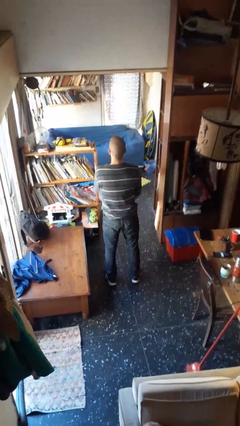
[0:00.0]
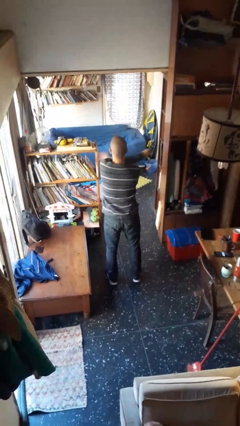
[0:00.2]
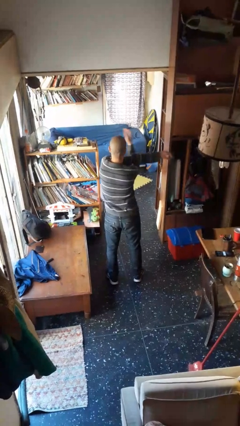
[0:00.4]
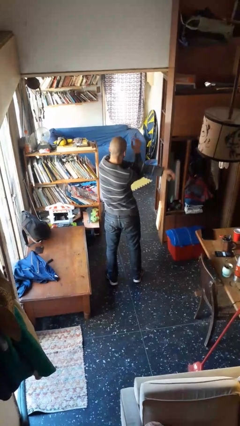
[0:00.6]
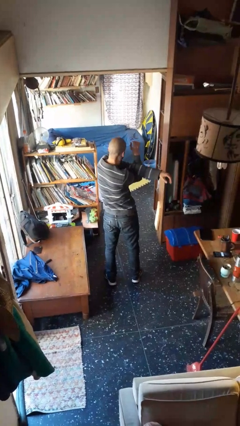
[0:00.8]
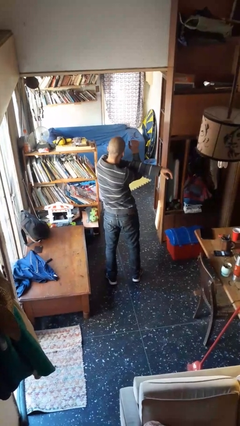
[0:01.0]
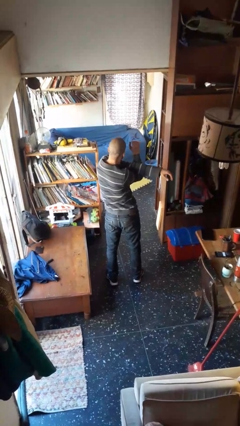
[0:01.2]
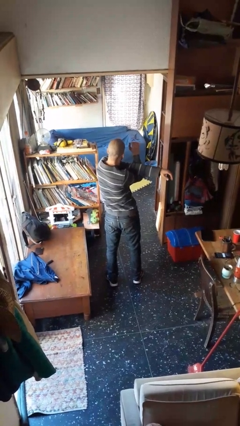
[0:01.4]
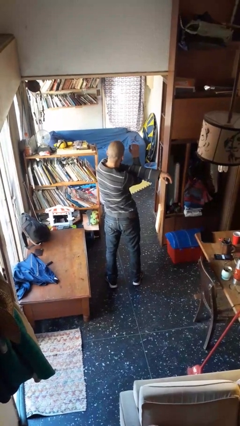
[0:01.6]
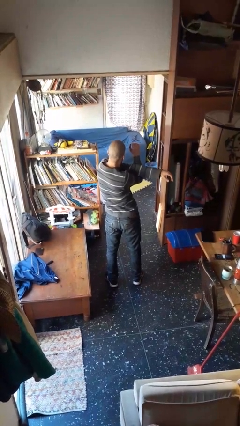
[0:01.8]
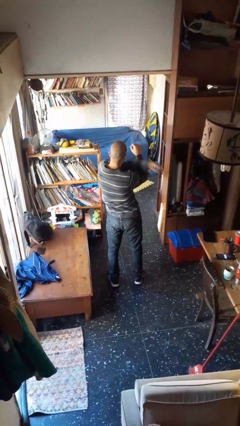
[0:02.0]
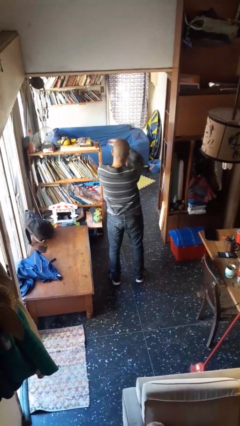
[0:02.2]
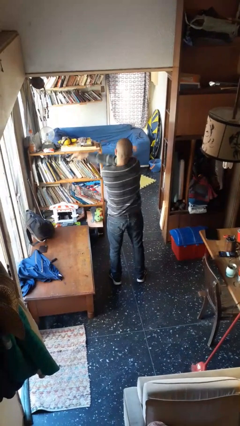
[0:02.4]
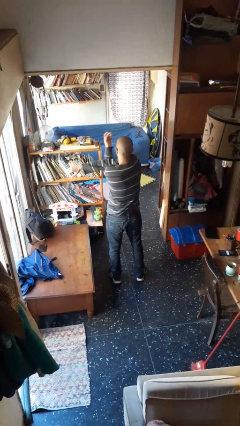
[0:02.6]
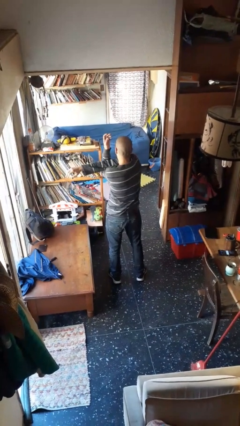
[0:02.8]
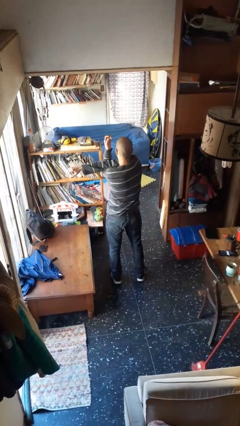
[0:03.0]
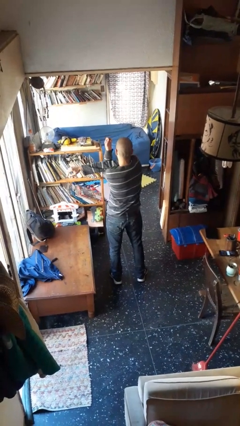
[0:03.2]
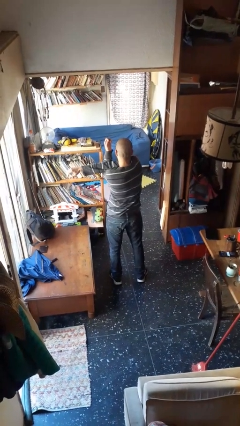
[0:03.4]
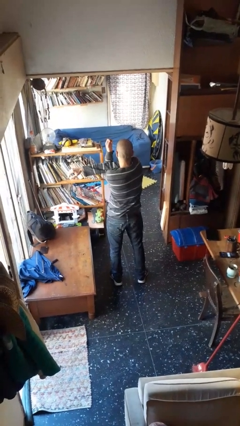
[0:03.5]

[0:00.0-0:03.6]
person stretches arms to side

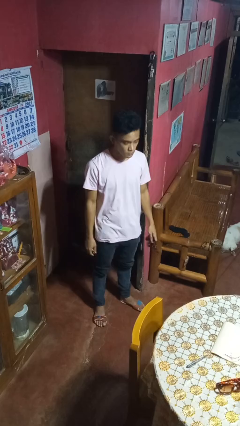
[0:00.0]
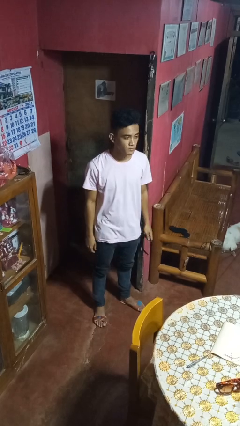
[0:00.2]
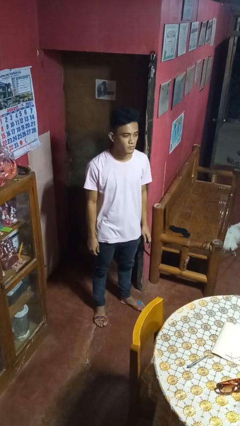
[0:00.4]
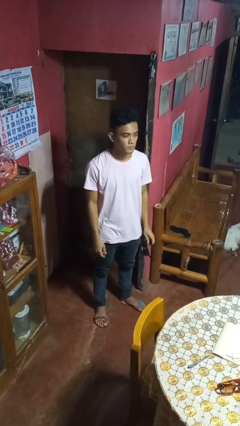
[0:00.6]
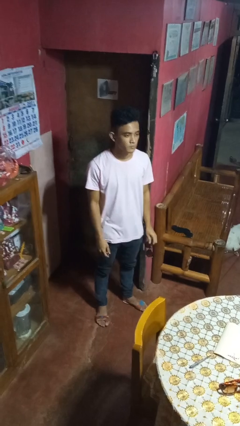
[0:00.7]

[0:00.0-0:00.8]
person takes off sunglasses

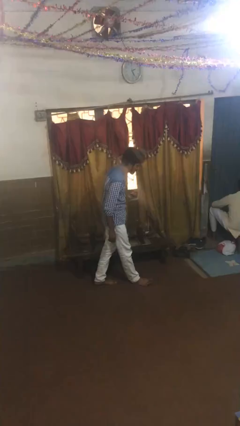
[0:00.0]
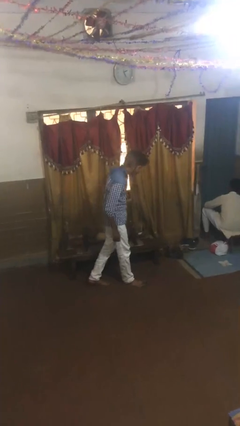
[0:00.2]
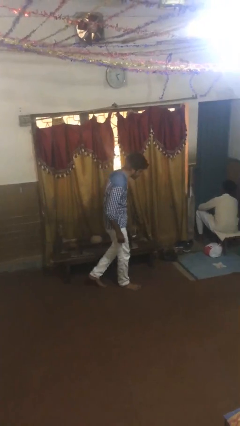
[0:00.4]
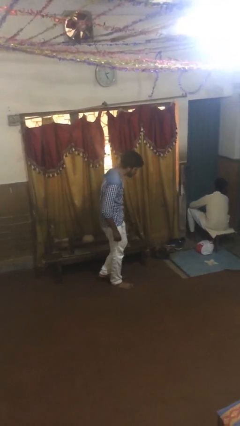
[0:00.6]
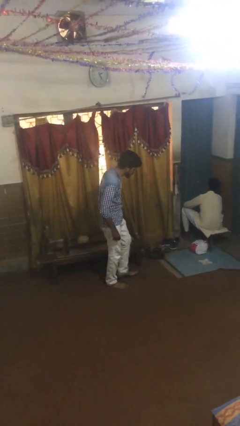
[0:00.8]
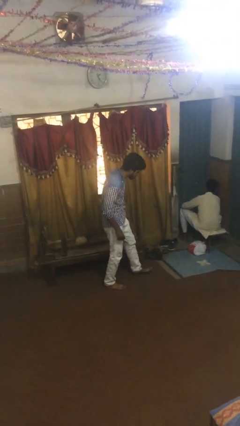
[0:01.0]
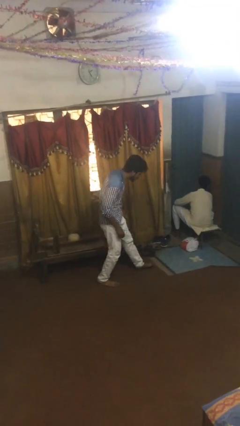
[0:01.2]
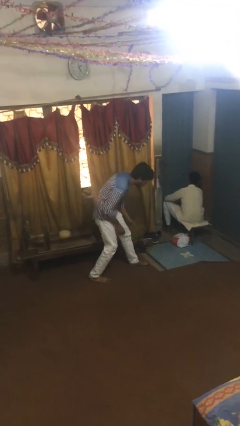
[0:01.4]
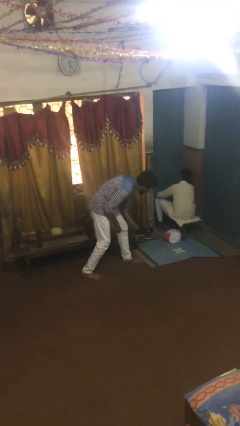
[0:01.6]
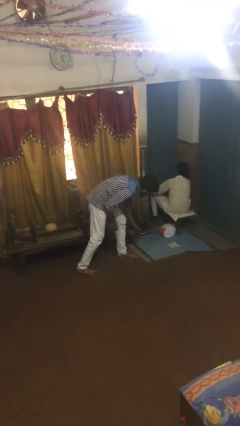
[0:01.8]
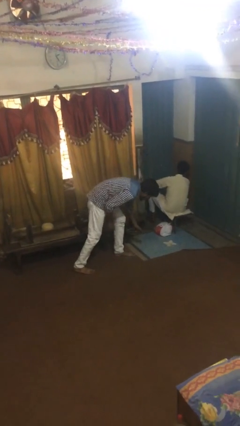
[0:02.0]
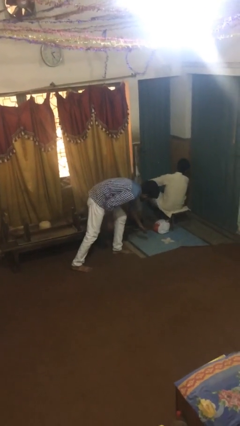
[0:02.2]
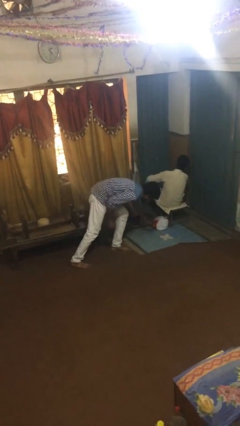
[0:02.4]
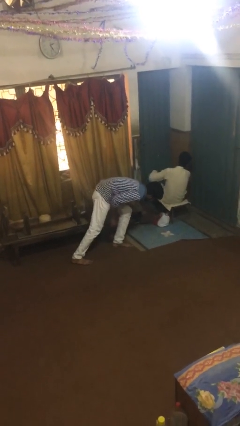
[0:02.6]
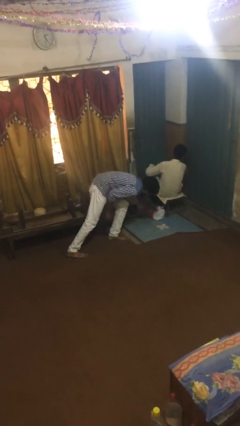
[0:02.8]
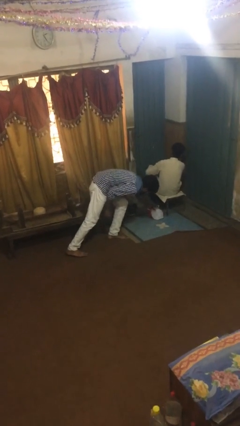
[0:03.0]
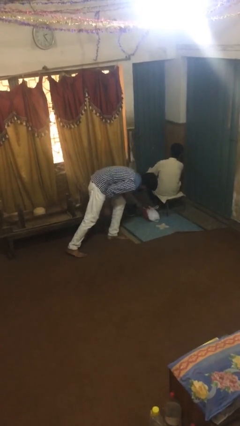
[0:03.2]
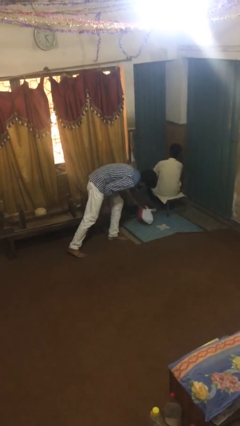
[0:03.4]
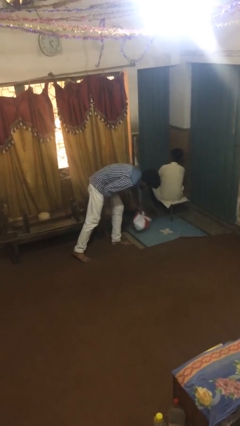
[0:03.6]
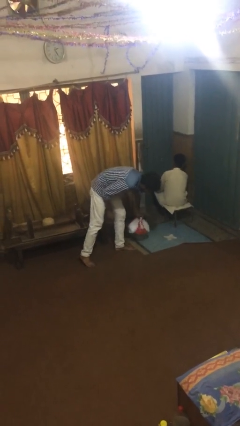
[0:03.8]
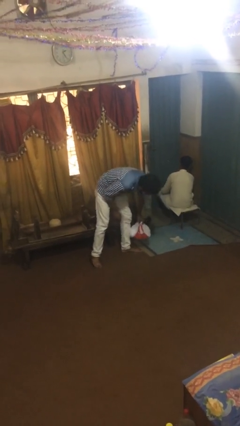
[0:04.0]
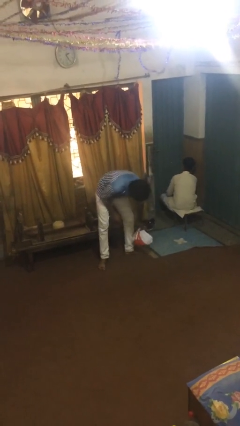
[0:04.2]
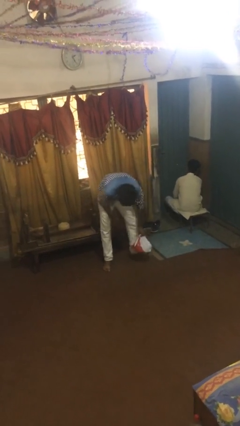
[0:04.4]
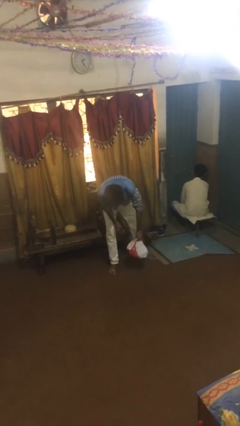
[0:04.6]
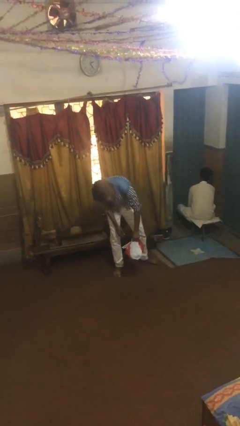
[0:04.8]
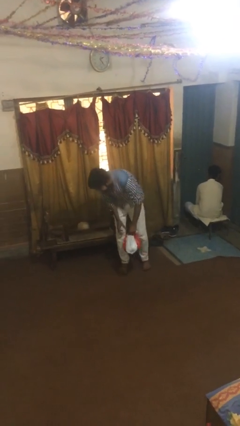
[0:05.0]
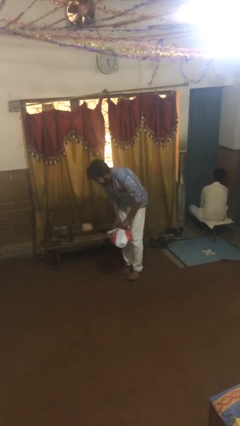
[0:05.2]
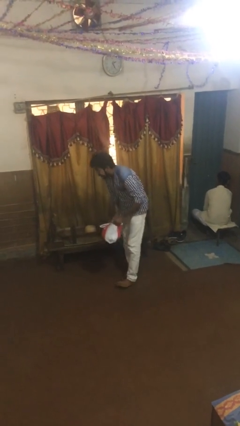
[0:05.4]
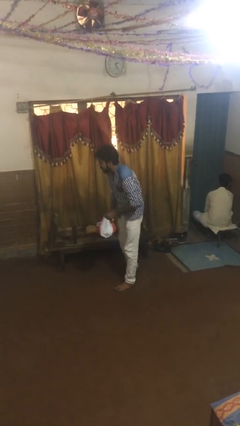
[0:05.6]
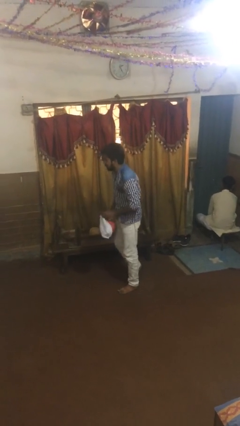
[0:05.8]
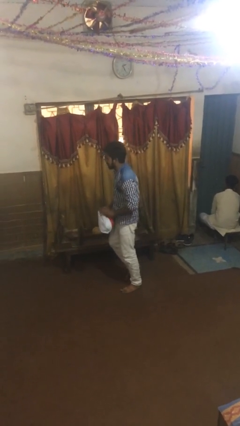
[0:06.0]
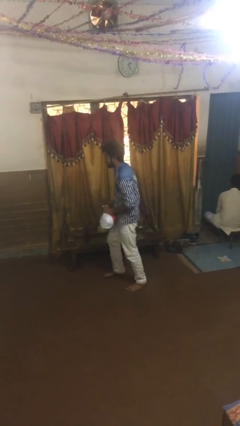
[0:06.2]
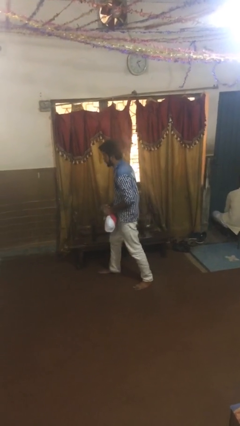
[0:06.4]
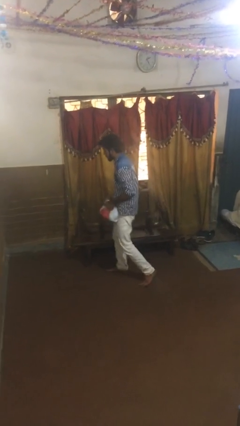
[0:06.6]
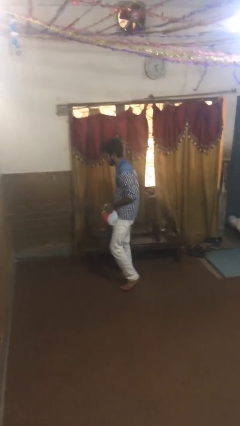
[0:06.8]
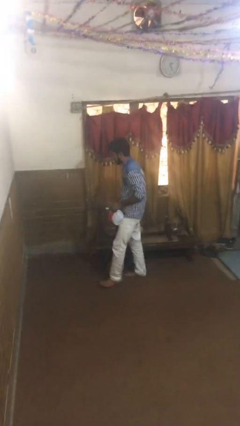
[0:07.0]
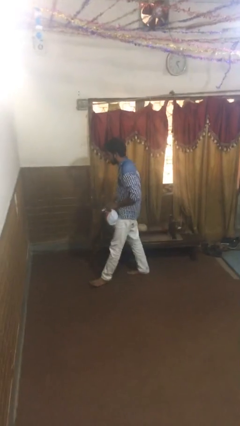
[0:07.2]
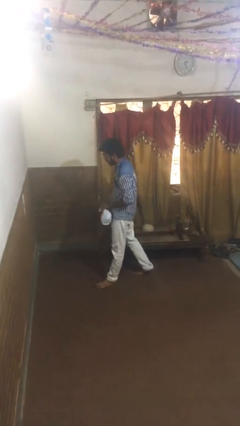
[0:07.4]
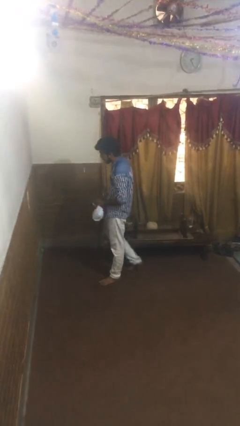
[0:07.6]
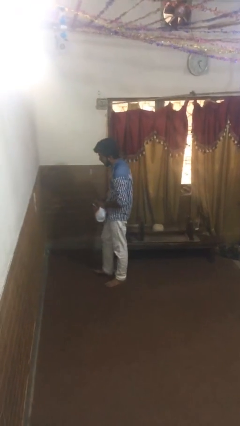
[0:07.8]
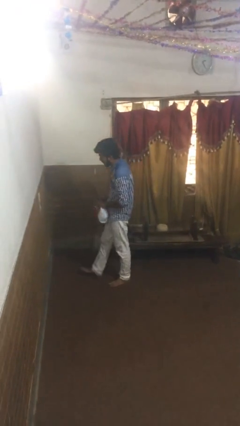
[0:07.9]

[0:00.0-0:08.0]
person steals object from person

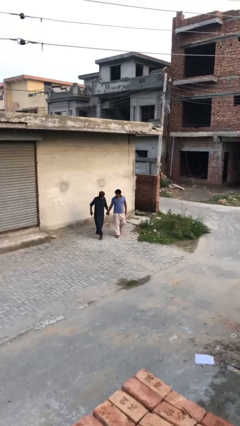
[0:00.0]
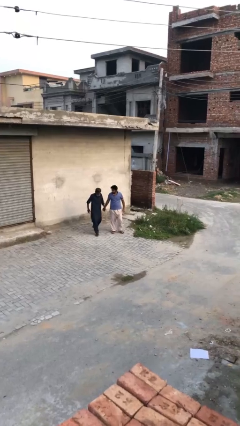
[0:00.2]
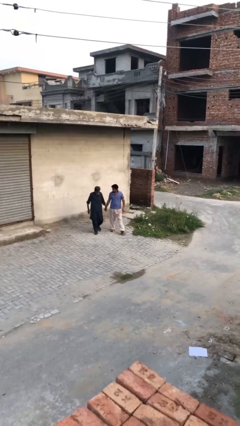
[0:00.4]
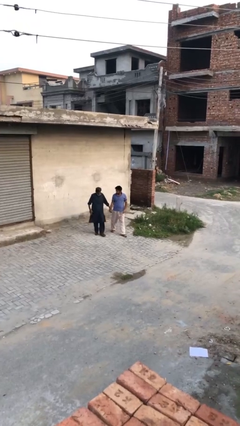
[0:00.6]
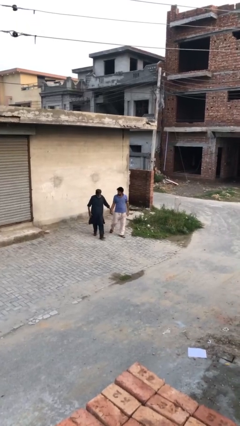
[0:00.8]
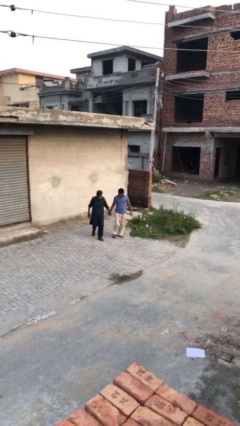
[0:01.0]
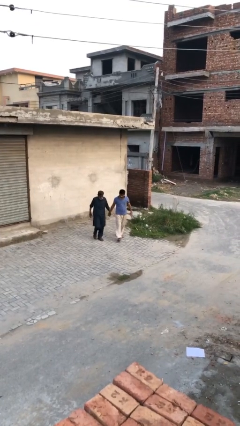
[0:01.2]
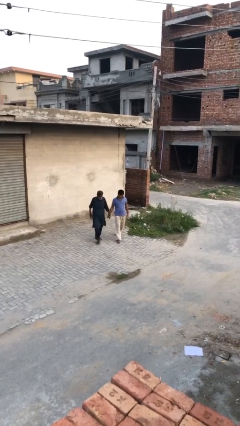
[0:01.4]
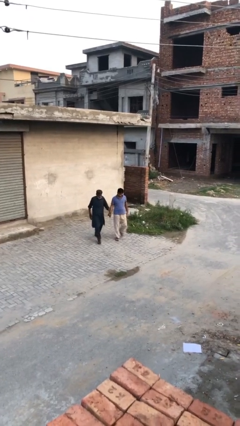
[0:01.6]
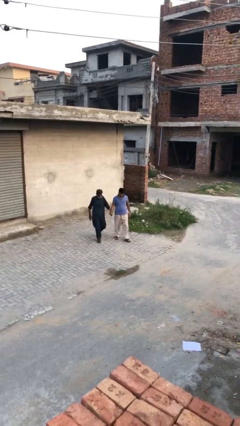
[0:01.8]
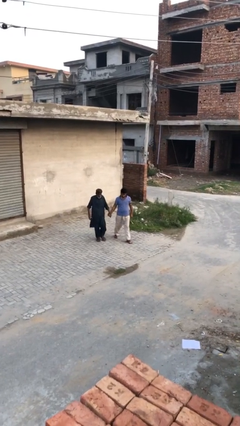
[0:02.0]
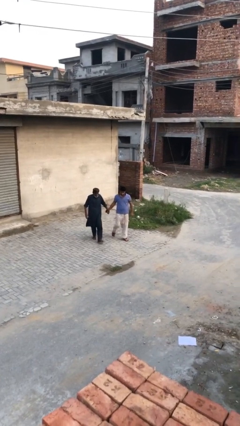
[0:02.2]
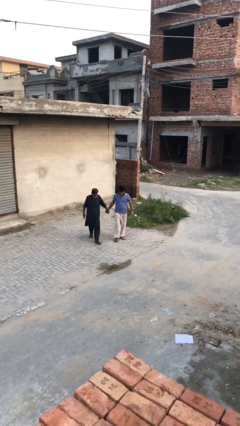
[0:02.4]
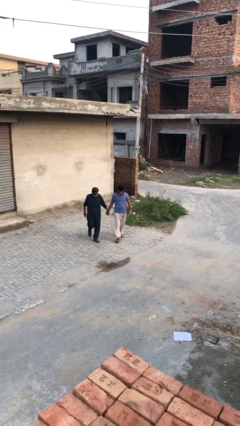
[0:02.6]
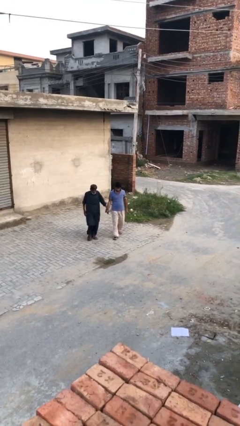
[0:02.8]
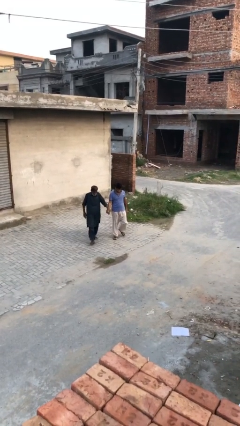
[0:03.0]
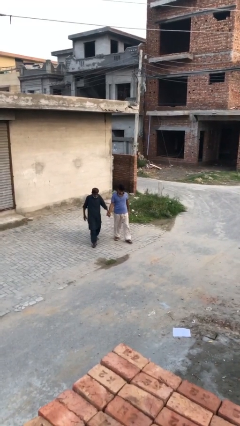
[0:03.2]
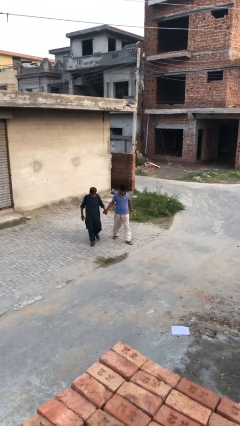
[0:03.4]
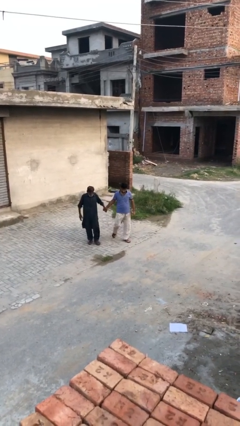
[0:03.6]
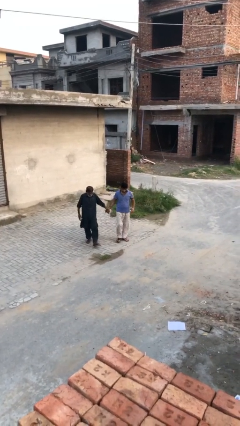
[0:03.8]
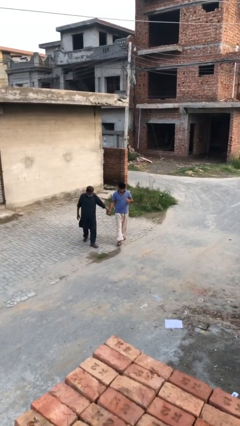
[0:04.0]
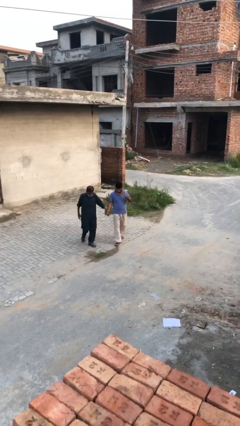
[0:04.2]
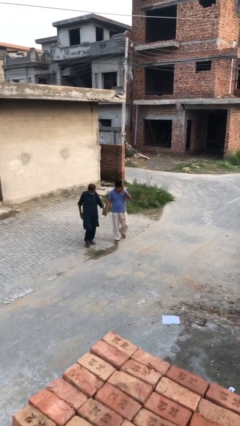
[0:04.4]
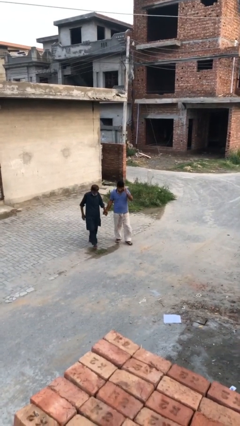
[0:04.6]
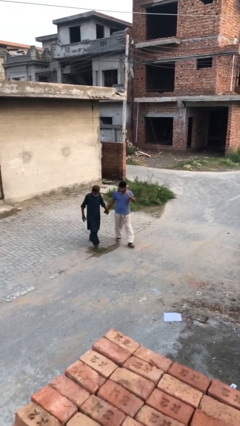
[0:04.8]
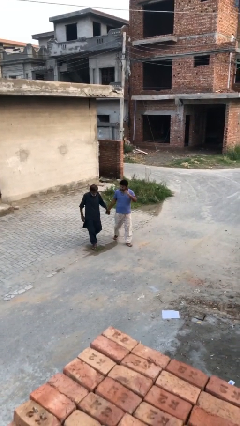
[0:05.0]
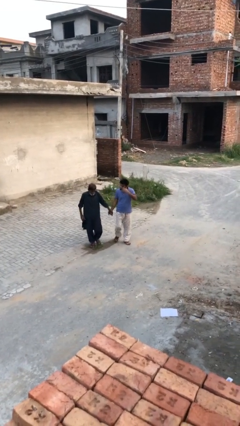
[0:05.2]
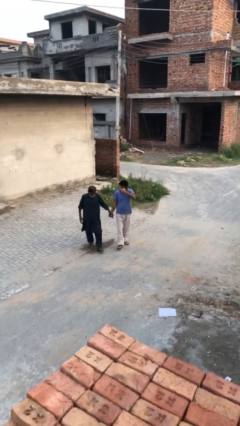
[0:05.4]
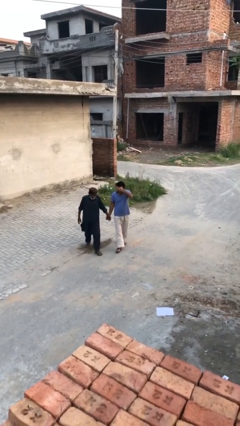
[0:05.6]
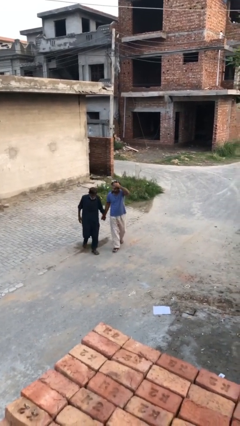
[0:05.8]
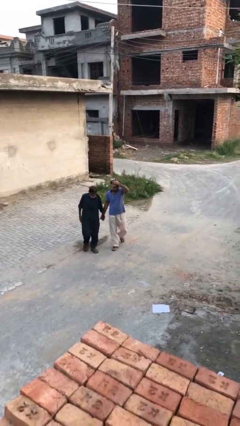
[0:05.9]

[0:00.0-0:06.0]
person holds hand
